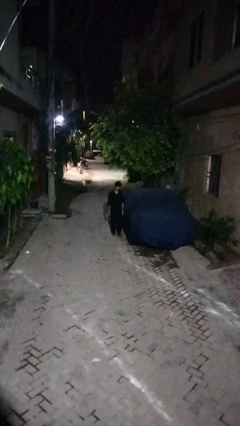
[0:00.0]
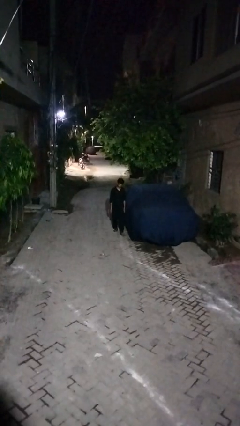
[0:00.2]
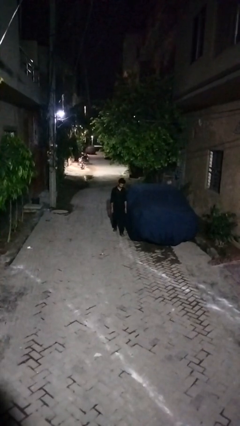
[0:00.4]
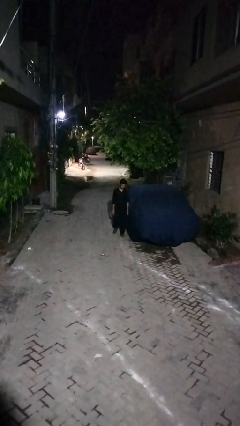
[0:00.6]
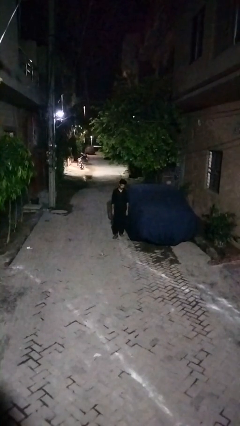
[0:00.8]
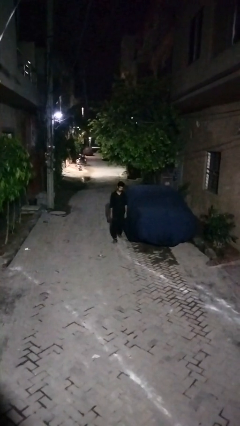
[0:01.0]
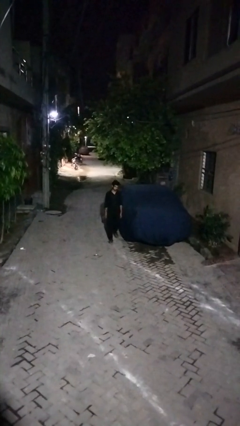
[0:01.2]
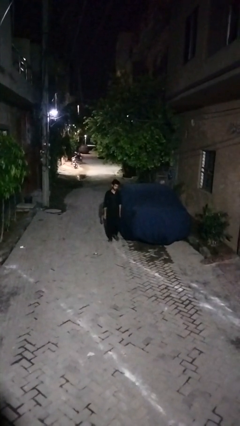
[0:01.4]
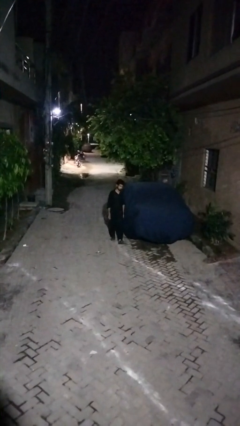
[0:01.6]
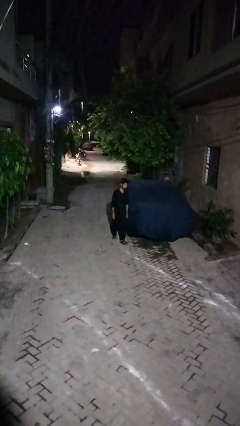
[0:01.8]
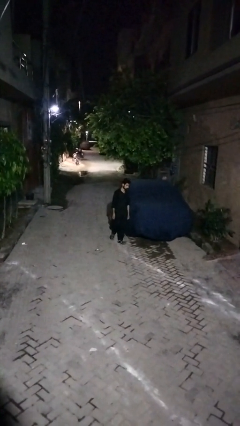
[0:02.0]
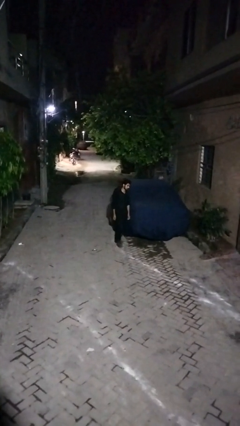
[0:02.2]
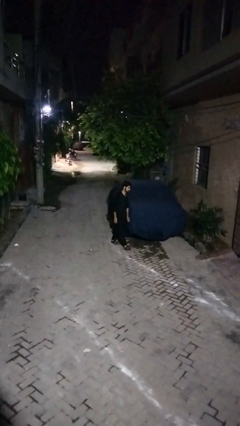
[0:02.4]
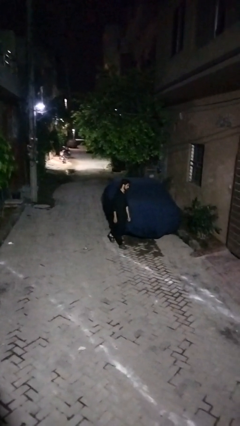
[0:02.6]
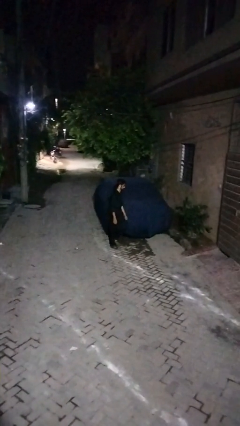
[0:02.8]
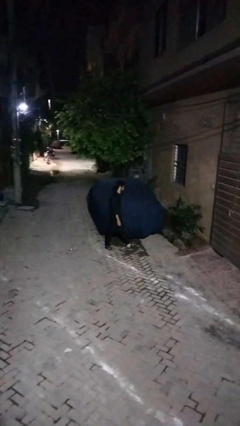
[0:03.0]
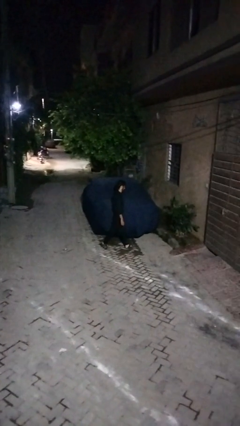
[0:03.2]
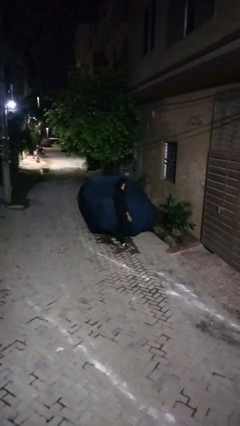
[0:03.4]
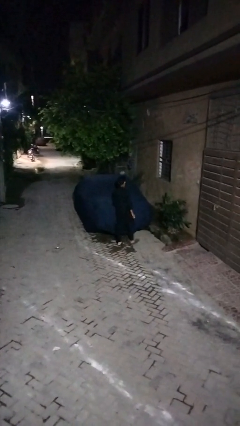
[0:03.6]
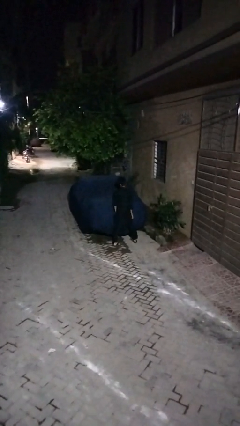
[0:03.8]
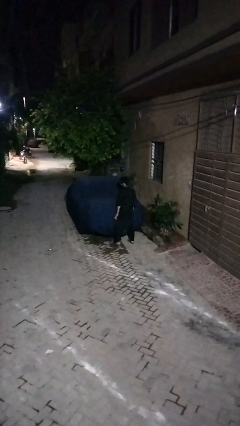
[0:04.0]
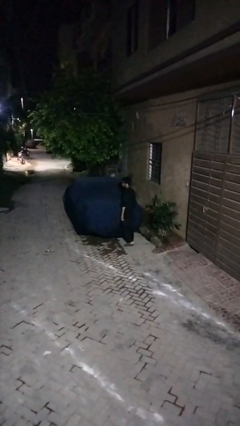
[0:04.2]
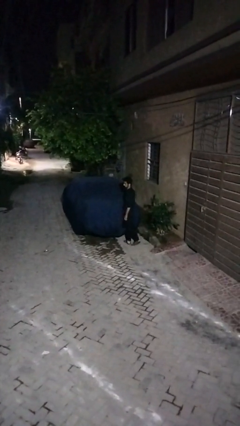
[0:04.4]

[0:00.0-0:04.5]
person walks around car

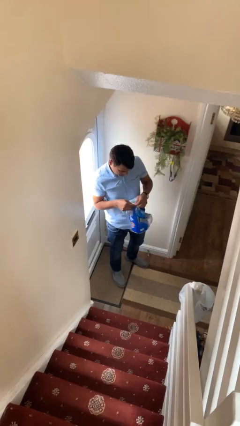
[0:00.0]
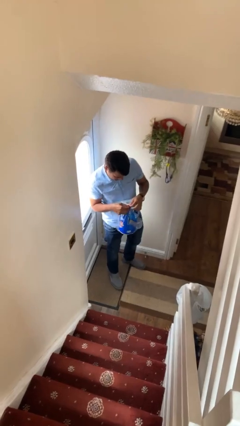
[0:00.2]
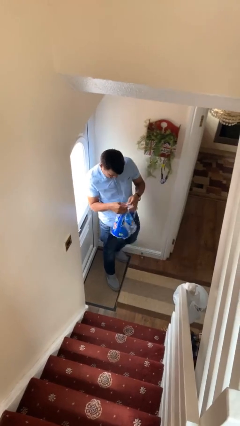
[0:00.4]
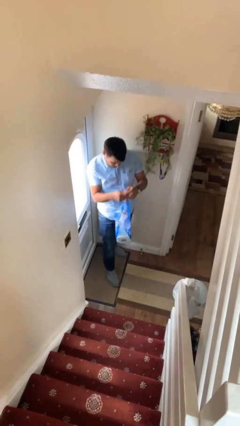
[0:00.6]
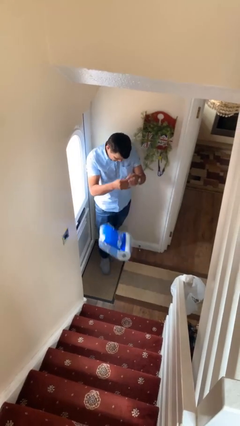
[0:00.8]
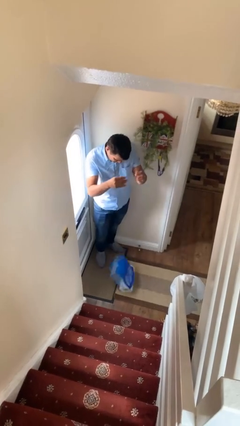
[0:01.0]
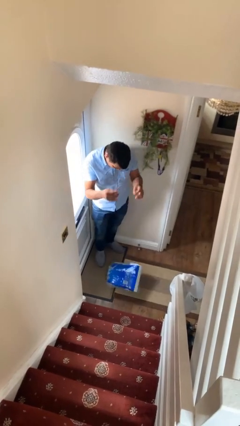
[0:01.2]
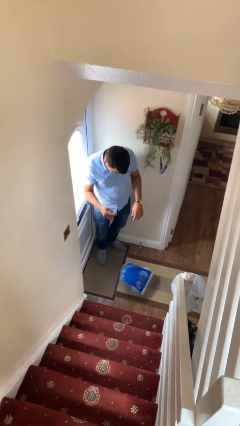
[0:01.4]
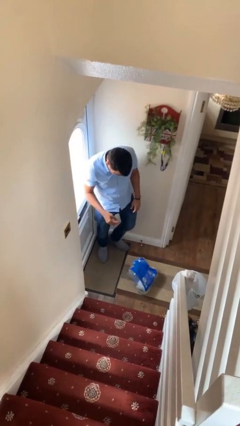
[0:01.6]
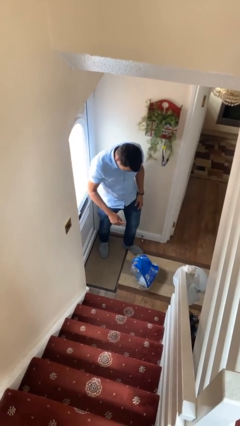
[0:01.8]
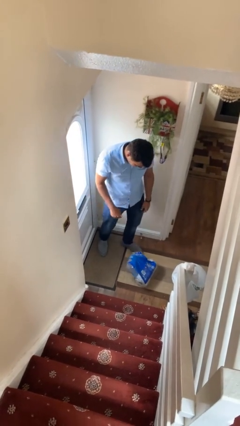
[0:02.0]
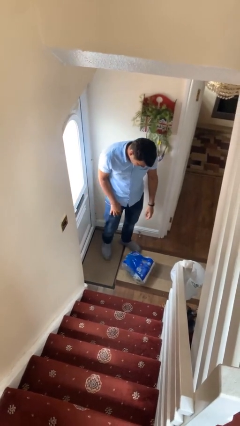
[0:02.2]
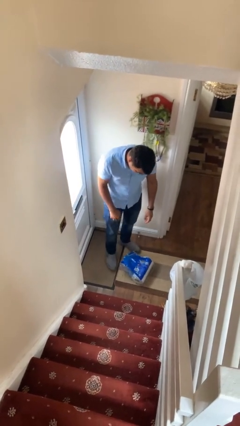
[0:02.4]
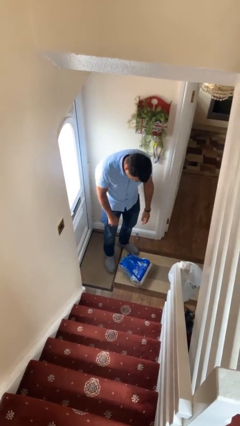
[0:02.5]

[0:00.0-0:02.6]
person drops object

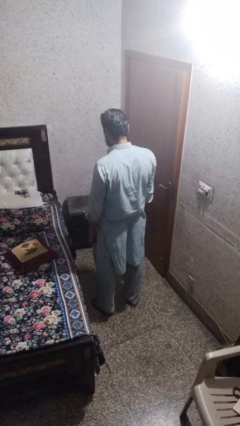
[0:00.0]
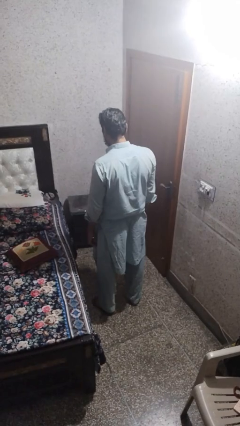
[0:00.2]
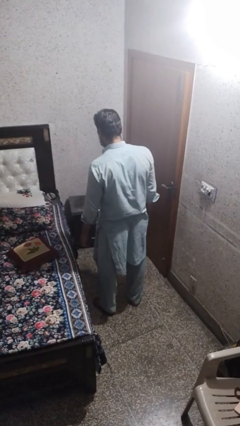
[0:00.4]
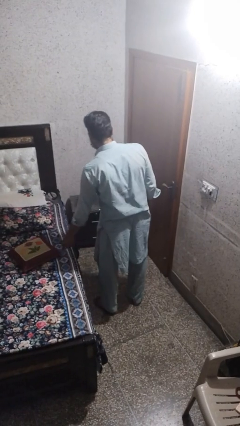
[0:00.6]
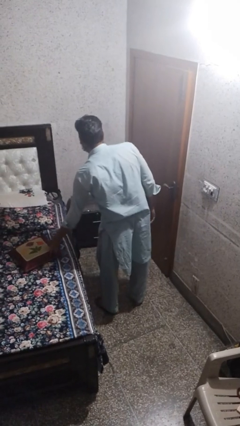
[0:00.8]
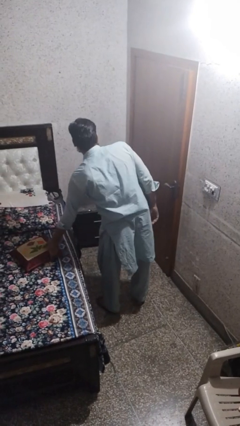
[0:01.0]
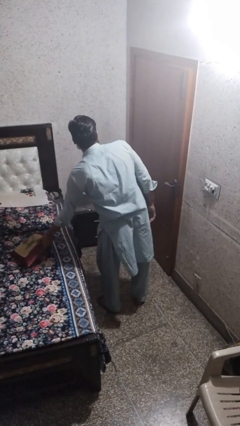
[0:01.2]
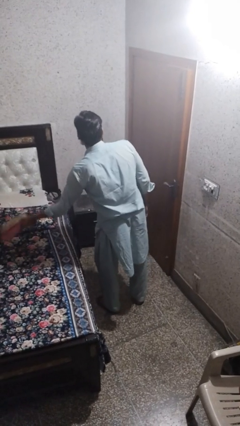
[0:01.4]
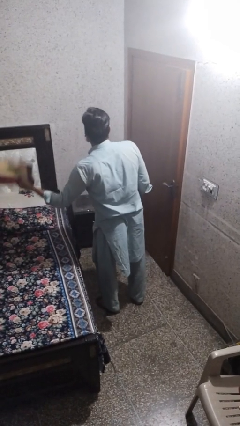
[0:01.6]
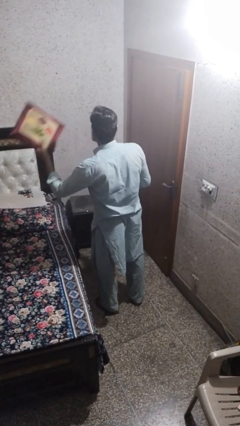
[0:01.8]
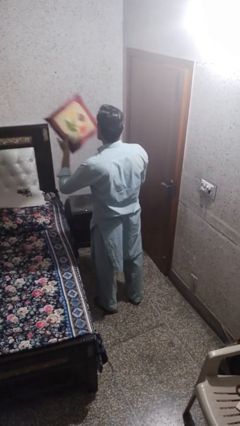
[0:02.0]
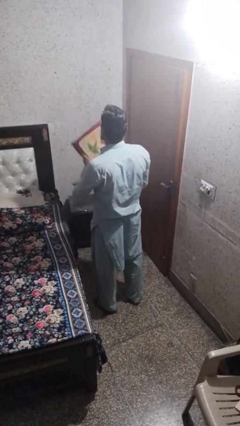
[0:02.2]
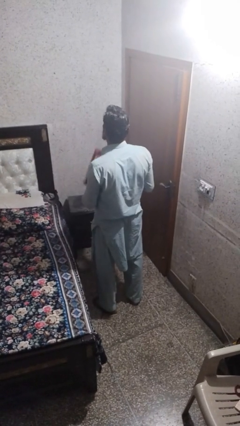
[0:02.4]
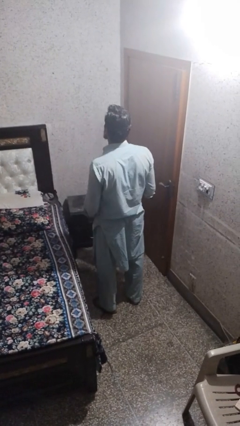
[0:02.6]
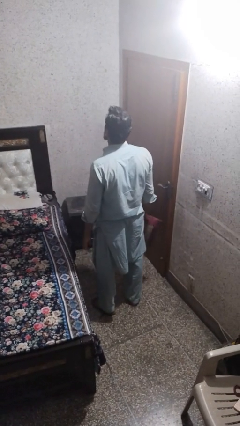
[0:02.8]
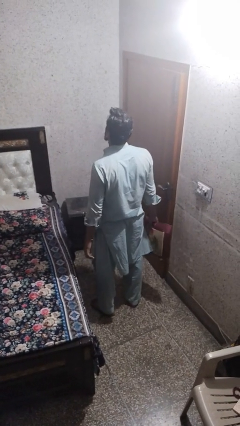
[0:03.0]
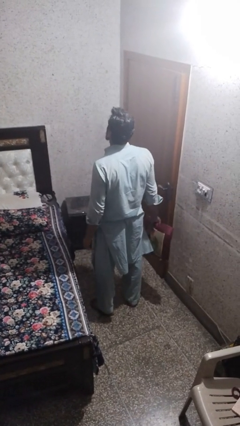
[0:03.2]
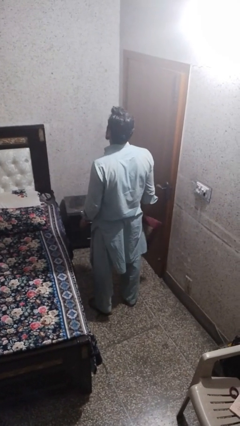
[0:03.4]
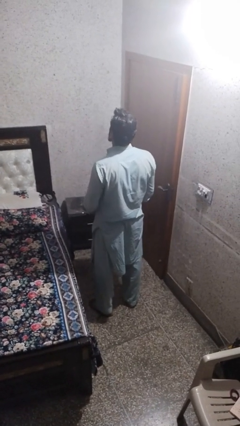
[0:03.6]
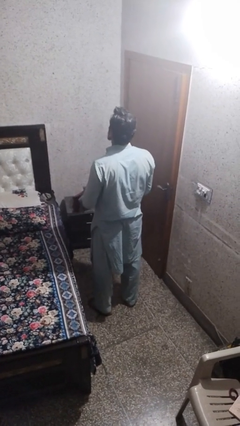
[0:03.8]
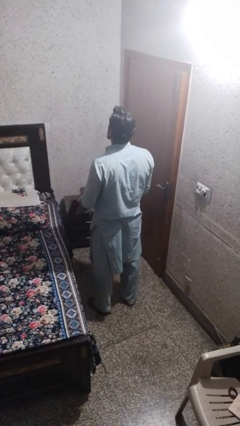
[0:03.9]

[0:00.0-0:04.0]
person picks up object from bed

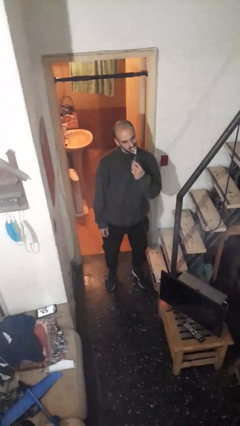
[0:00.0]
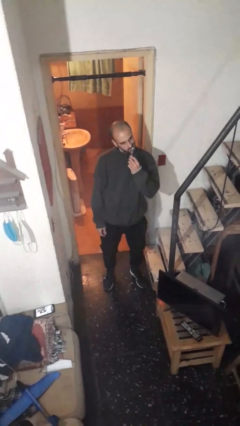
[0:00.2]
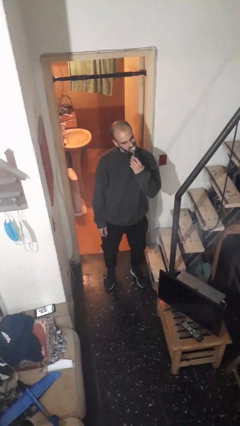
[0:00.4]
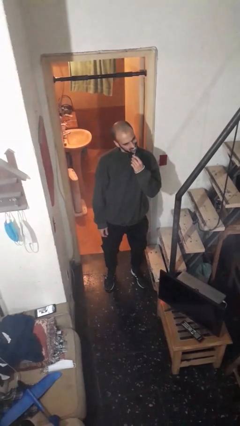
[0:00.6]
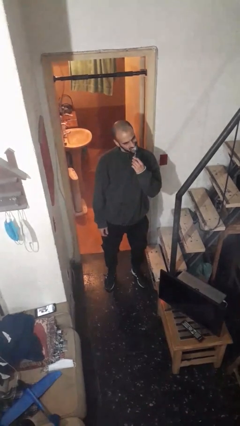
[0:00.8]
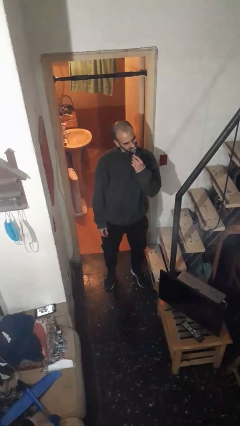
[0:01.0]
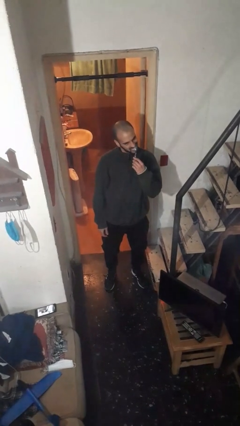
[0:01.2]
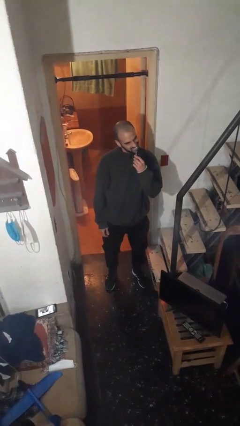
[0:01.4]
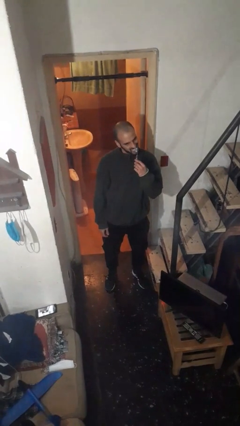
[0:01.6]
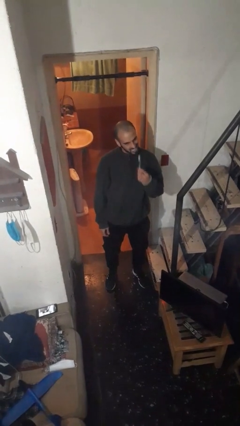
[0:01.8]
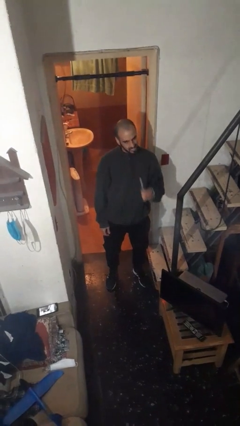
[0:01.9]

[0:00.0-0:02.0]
person brushes teeth

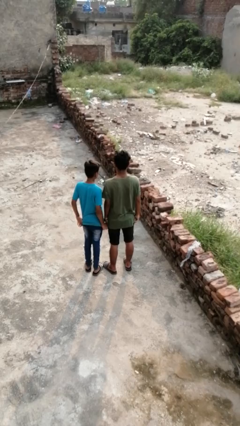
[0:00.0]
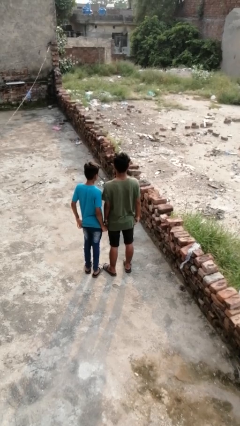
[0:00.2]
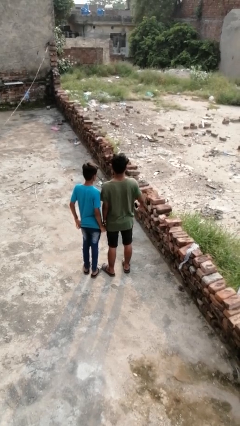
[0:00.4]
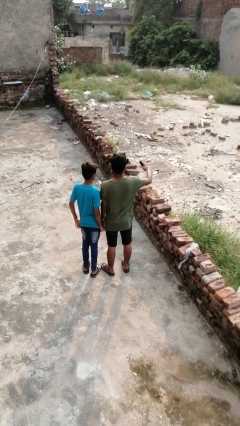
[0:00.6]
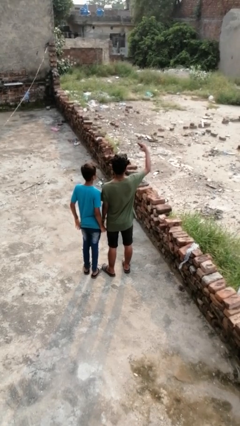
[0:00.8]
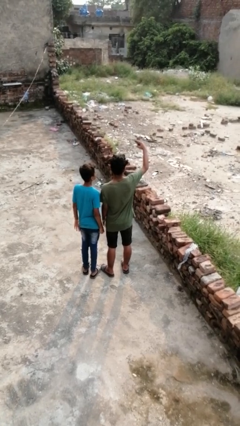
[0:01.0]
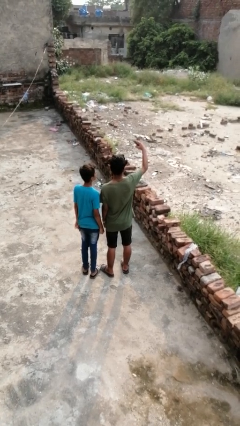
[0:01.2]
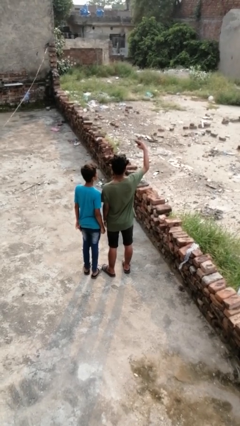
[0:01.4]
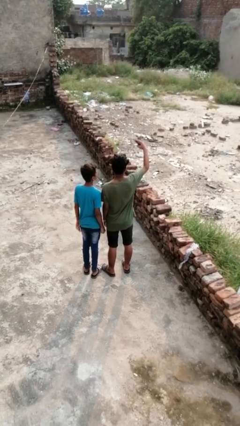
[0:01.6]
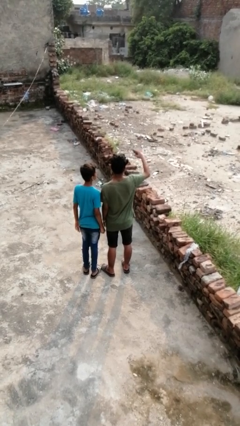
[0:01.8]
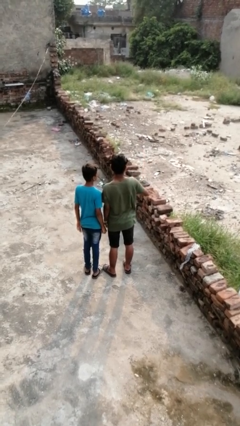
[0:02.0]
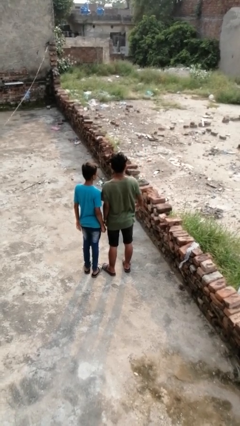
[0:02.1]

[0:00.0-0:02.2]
person takes selfie with person

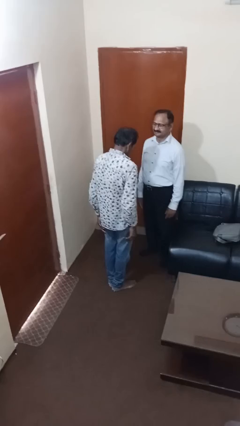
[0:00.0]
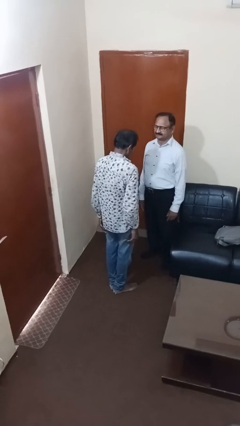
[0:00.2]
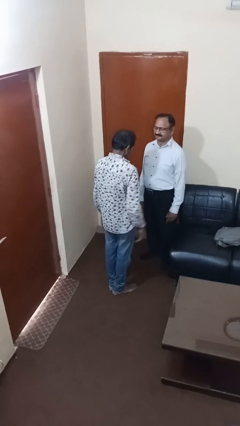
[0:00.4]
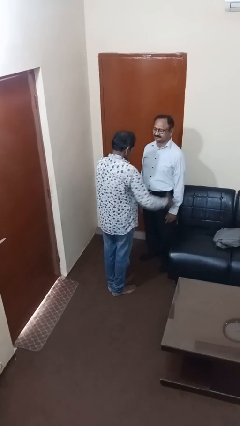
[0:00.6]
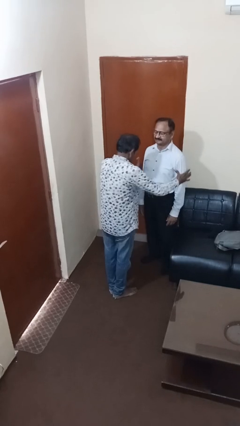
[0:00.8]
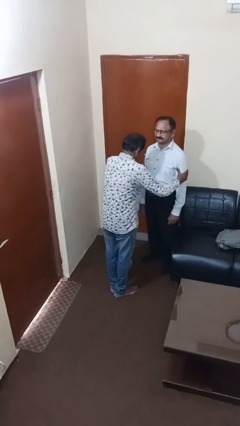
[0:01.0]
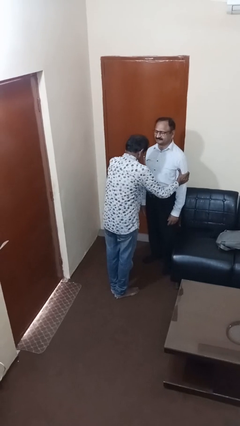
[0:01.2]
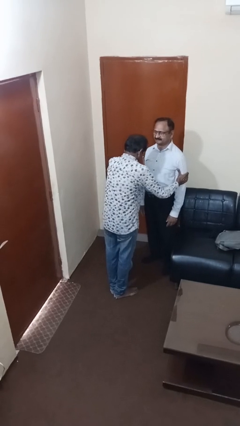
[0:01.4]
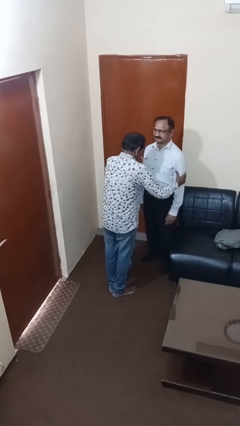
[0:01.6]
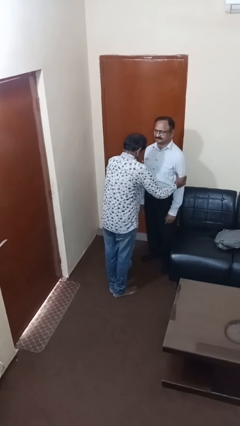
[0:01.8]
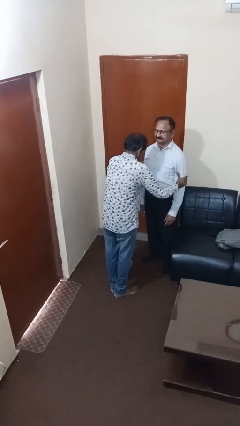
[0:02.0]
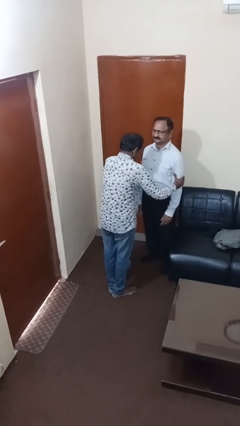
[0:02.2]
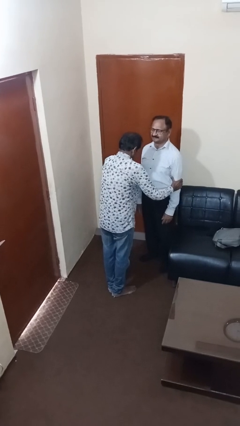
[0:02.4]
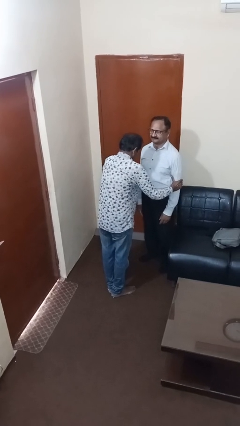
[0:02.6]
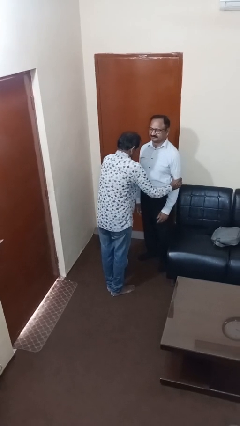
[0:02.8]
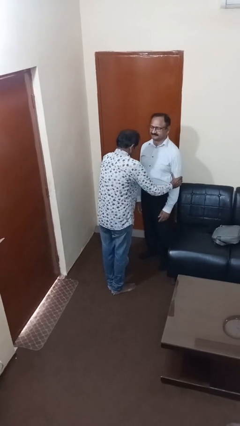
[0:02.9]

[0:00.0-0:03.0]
person grabs person by bicep
